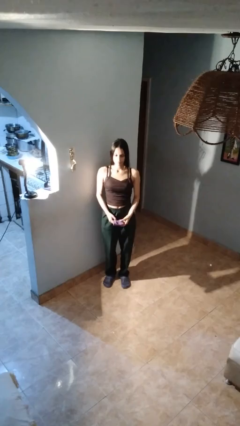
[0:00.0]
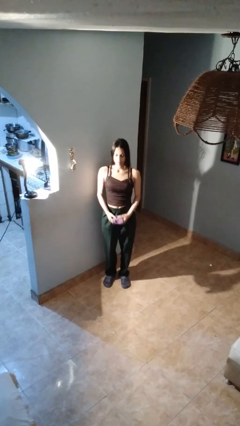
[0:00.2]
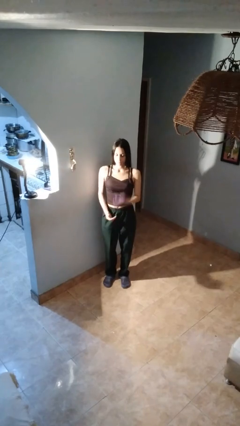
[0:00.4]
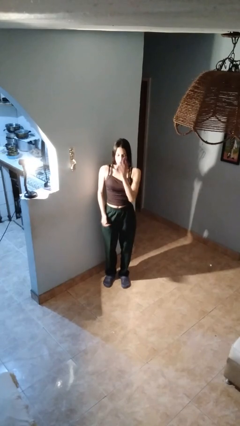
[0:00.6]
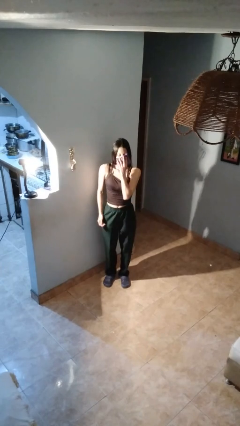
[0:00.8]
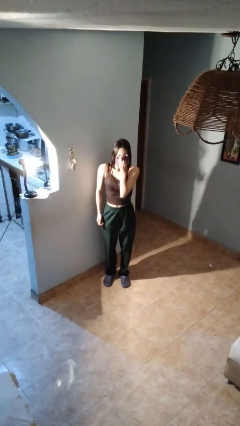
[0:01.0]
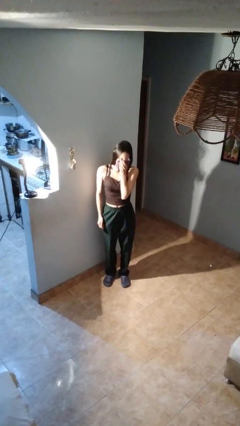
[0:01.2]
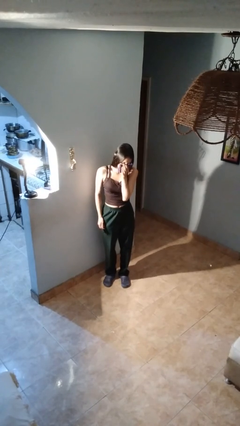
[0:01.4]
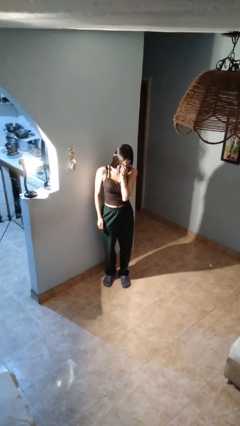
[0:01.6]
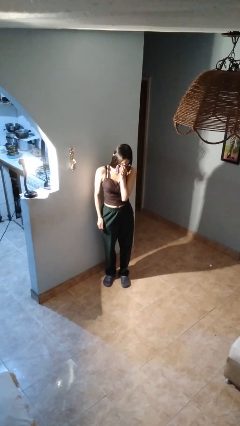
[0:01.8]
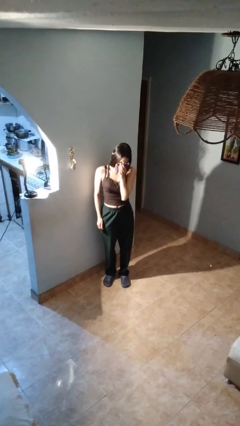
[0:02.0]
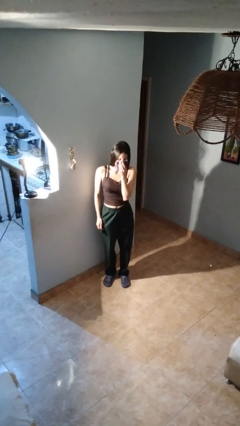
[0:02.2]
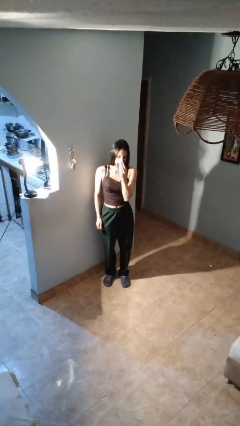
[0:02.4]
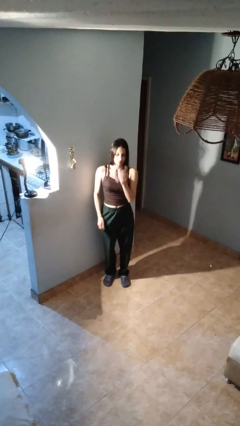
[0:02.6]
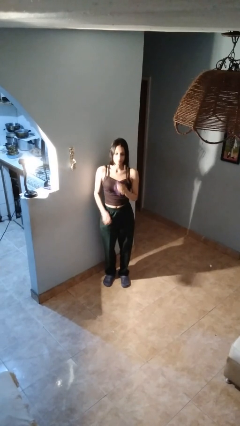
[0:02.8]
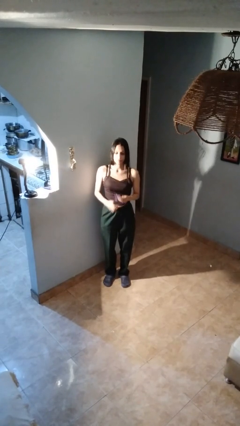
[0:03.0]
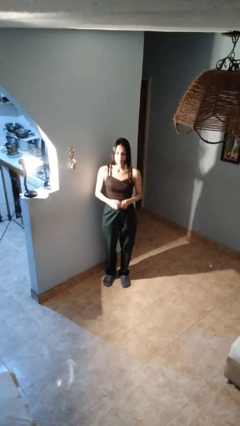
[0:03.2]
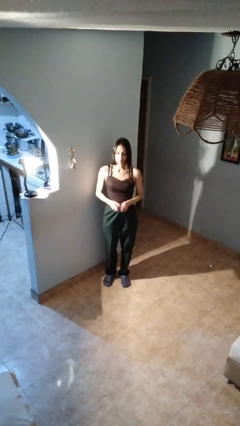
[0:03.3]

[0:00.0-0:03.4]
person blows nose

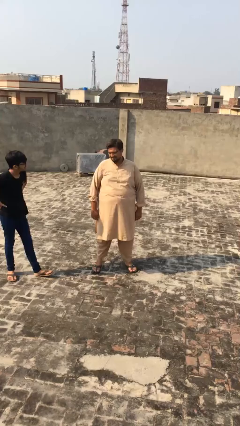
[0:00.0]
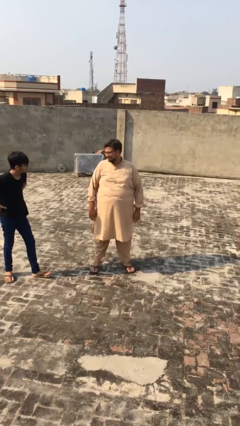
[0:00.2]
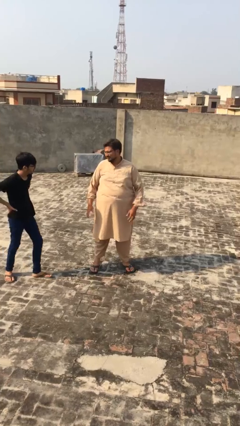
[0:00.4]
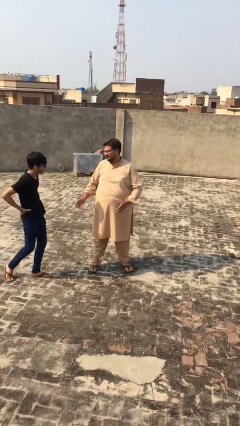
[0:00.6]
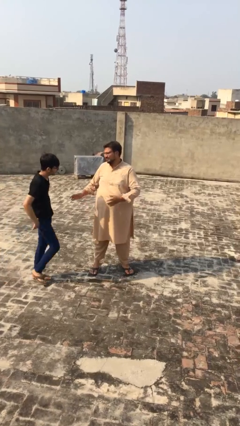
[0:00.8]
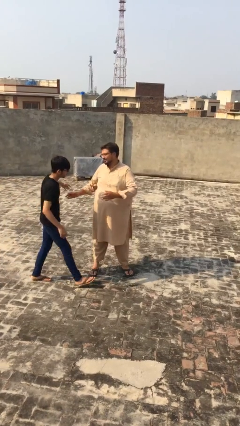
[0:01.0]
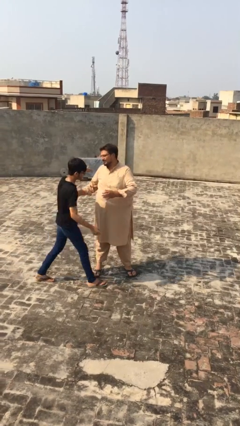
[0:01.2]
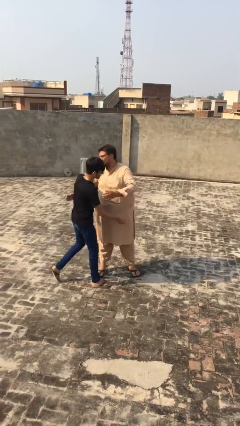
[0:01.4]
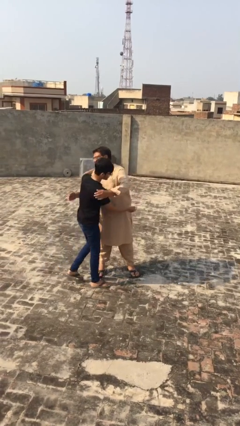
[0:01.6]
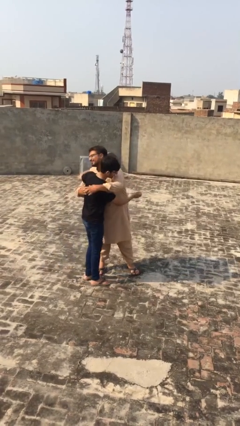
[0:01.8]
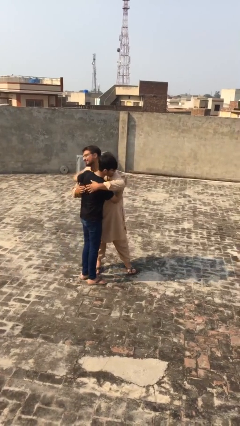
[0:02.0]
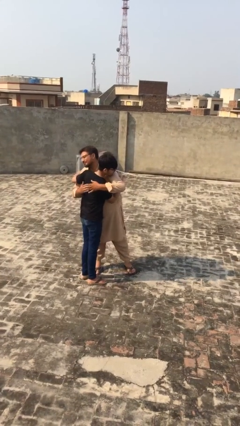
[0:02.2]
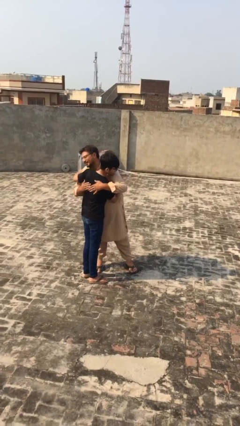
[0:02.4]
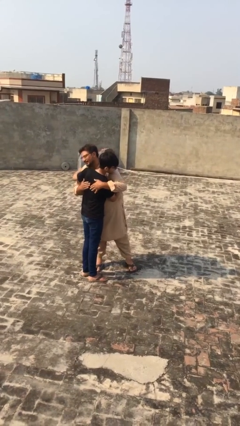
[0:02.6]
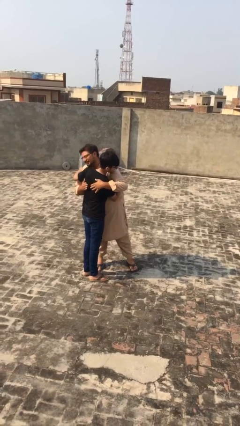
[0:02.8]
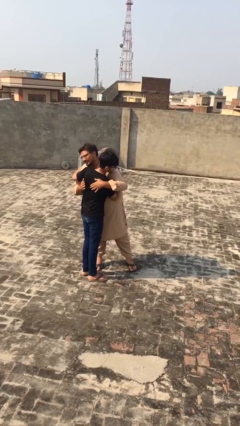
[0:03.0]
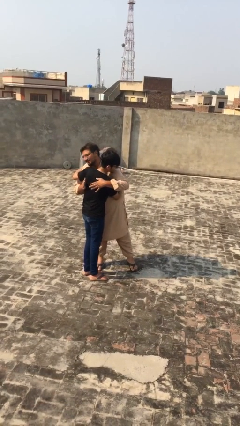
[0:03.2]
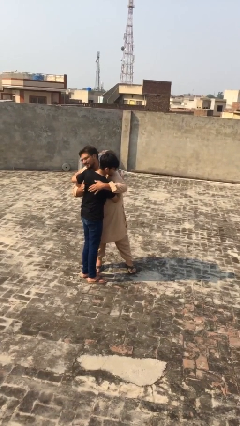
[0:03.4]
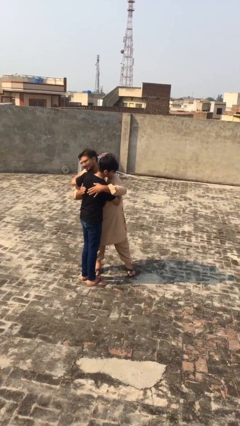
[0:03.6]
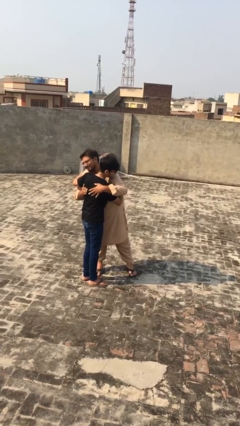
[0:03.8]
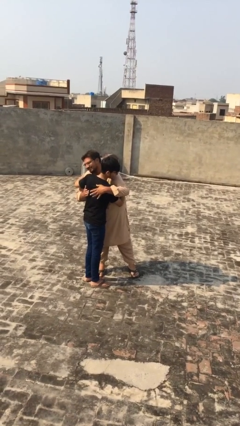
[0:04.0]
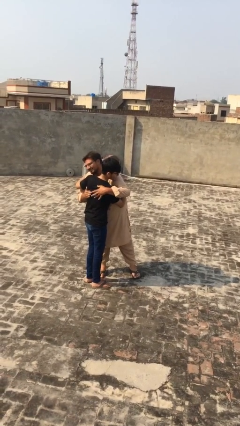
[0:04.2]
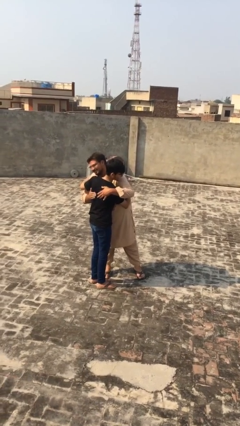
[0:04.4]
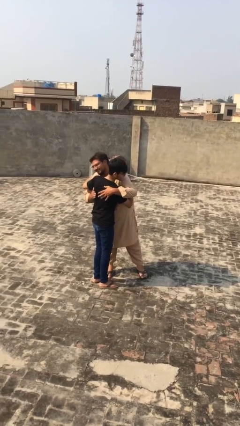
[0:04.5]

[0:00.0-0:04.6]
person embraces person

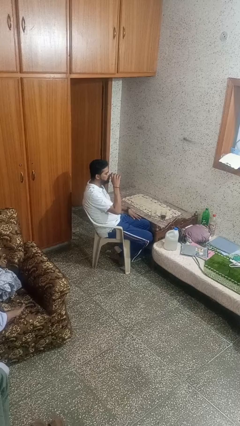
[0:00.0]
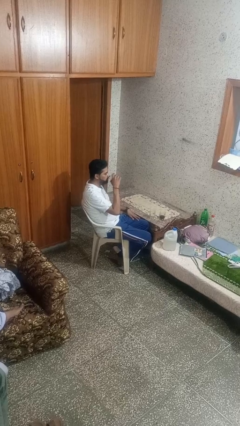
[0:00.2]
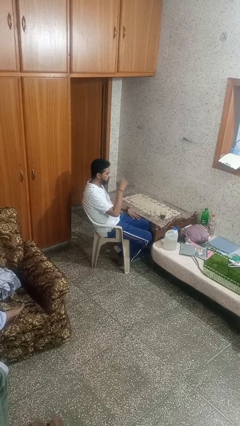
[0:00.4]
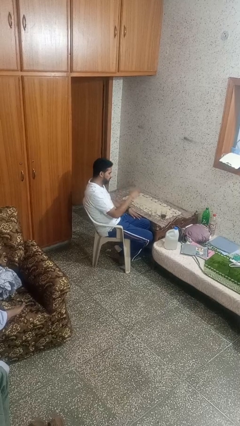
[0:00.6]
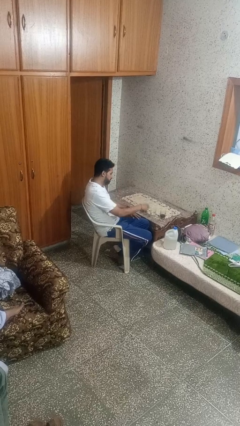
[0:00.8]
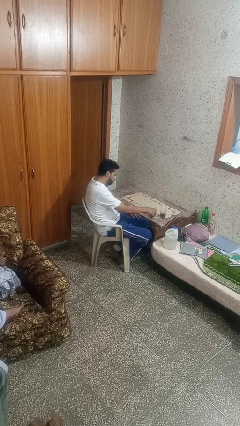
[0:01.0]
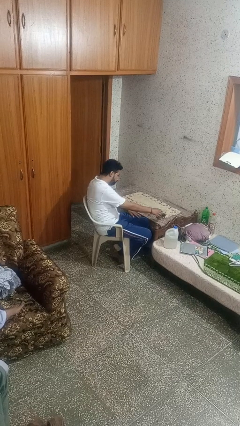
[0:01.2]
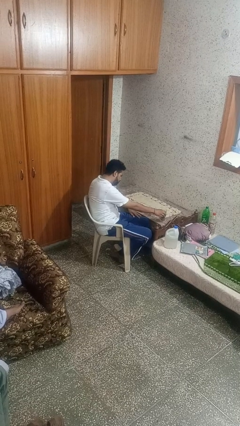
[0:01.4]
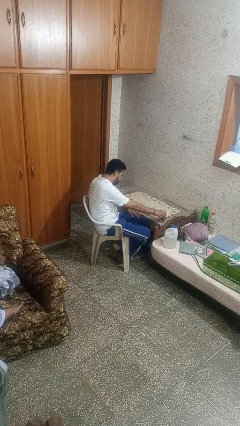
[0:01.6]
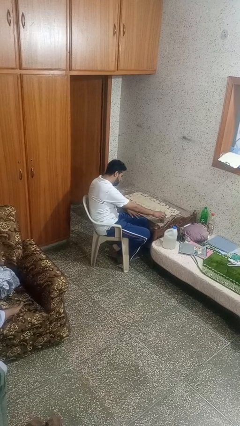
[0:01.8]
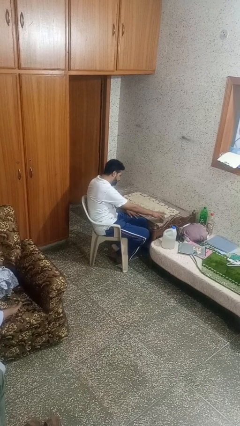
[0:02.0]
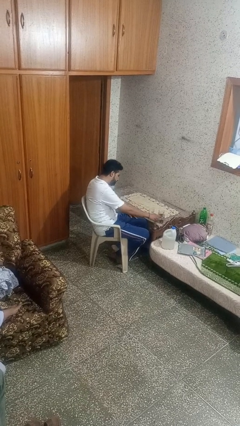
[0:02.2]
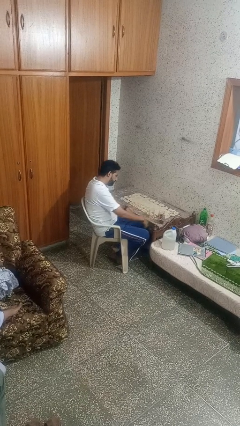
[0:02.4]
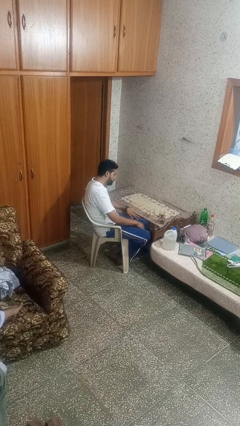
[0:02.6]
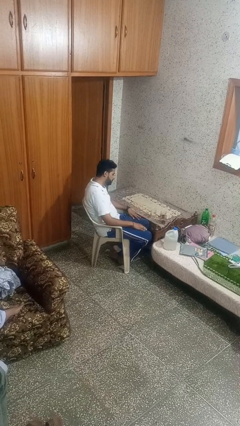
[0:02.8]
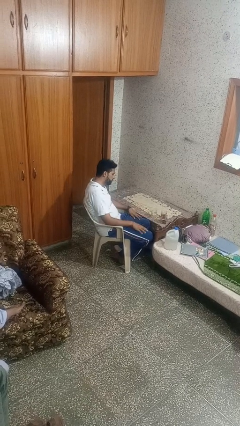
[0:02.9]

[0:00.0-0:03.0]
person puts down object on table

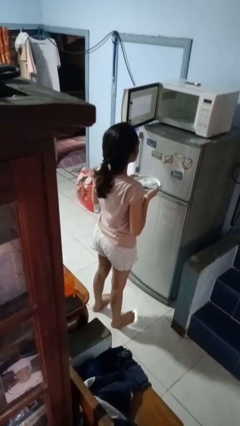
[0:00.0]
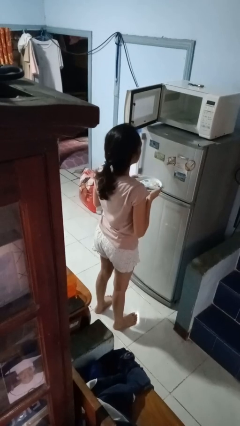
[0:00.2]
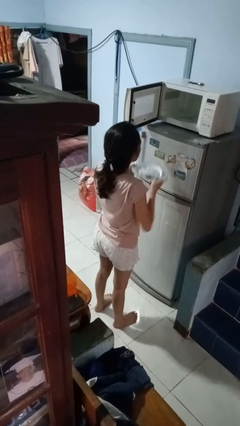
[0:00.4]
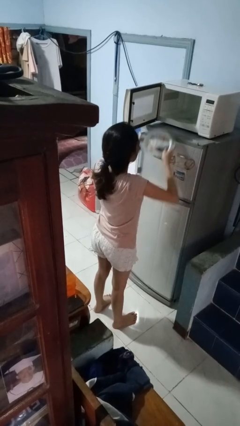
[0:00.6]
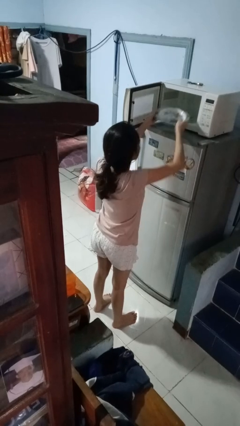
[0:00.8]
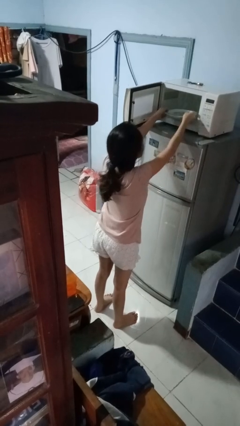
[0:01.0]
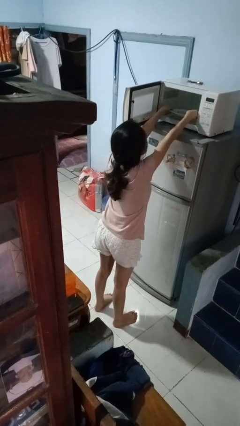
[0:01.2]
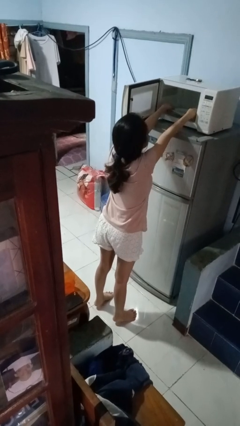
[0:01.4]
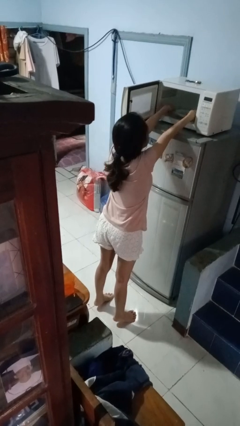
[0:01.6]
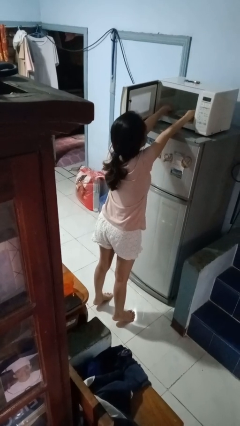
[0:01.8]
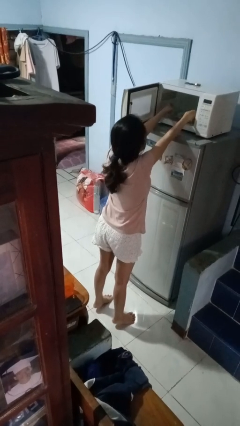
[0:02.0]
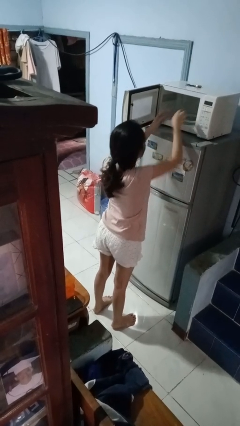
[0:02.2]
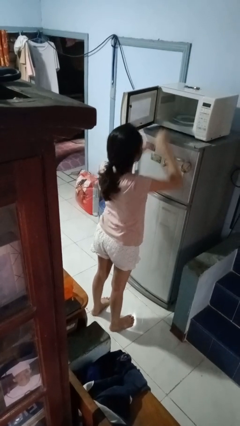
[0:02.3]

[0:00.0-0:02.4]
person puts object into microwave

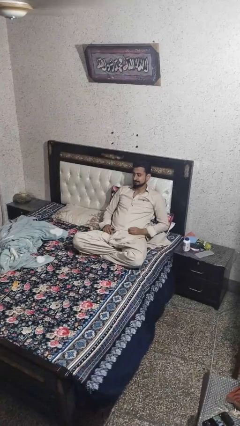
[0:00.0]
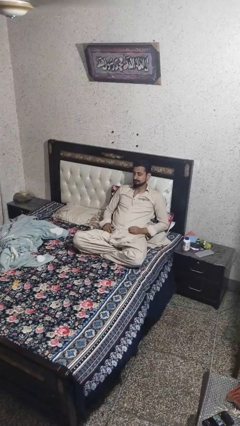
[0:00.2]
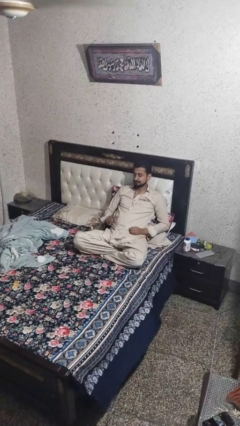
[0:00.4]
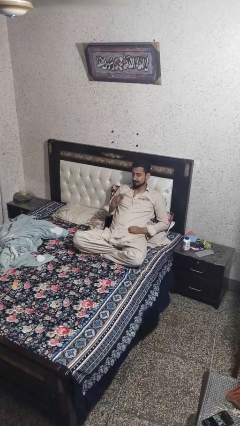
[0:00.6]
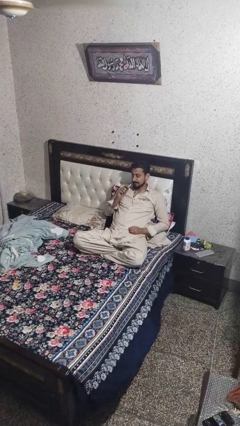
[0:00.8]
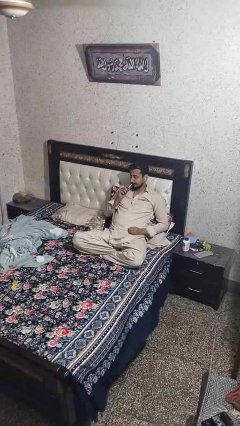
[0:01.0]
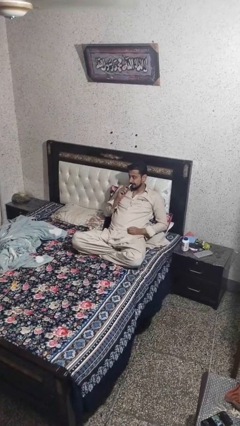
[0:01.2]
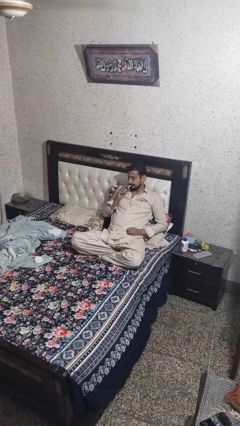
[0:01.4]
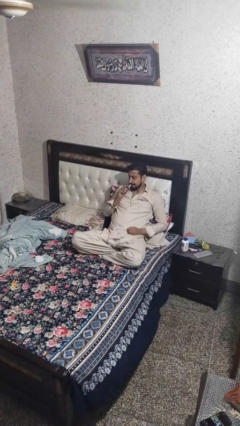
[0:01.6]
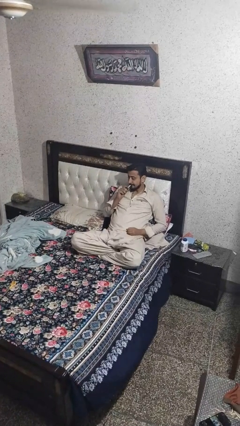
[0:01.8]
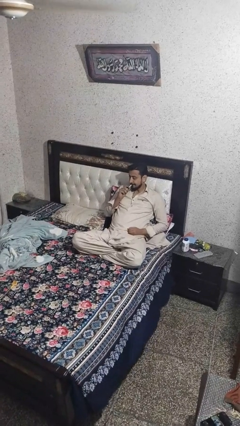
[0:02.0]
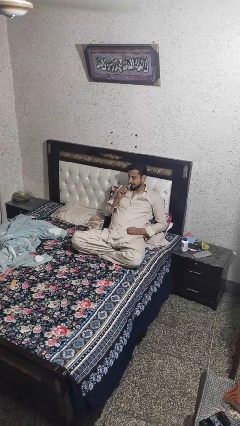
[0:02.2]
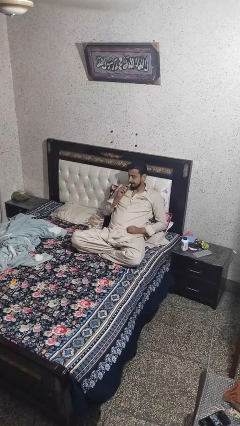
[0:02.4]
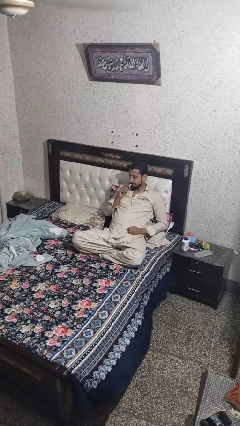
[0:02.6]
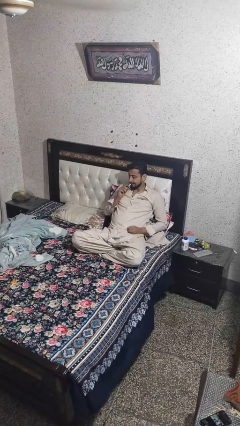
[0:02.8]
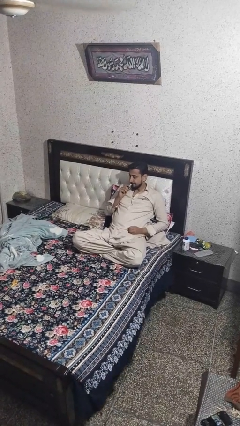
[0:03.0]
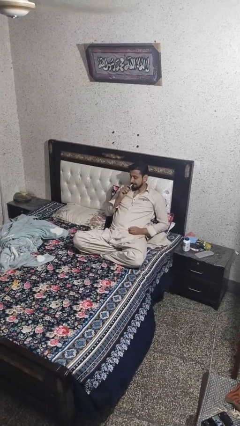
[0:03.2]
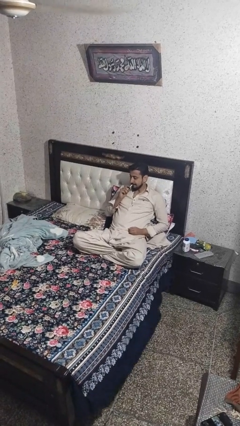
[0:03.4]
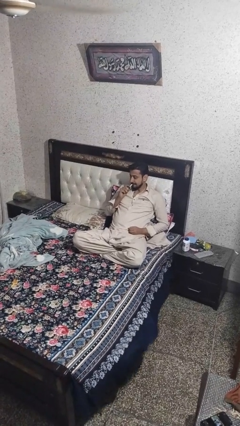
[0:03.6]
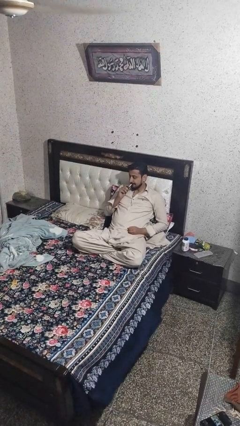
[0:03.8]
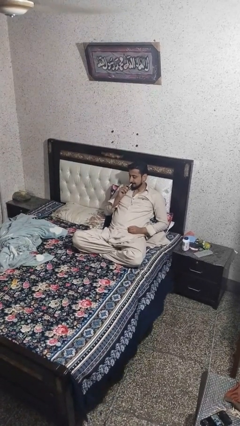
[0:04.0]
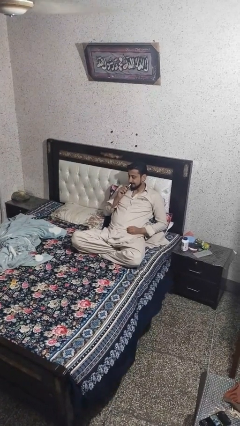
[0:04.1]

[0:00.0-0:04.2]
person vapes

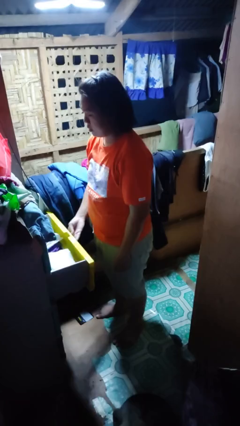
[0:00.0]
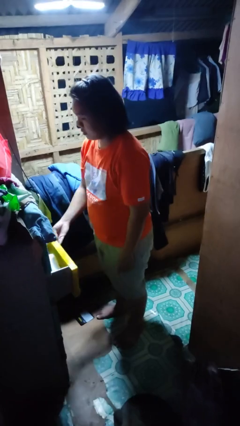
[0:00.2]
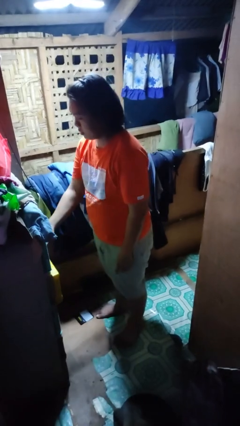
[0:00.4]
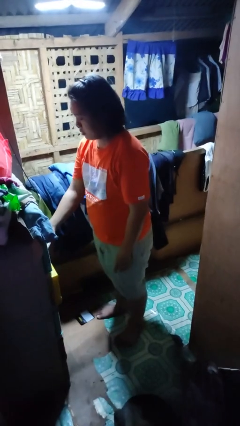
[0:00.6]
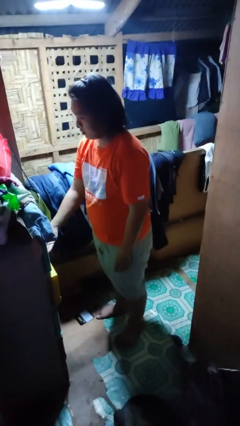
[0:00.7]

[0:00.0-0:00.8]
person closes dresser drawer
